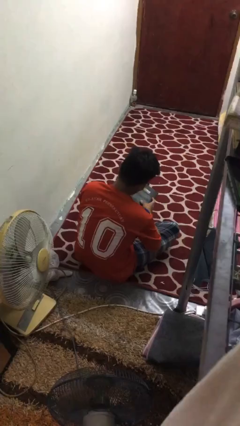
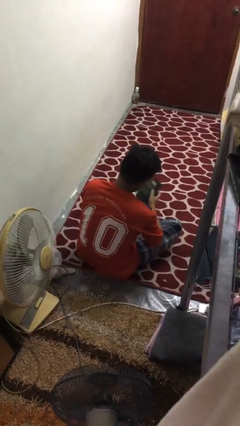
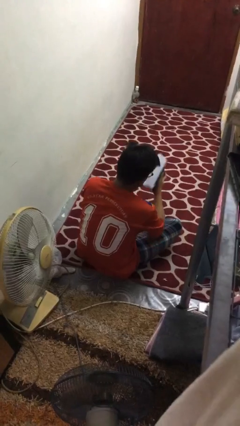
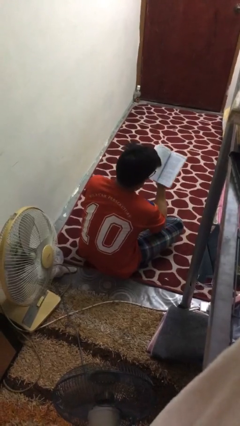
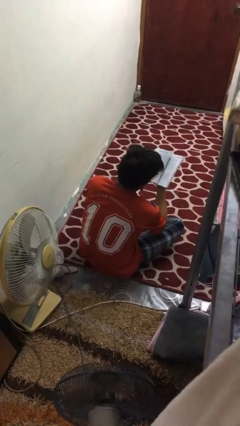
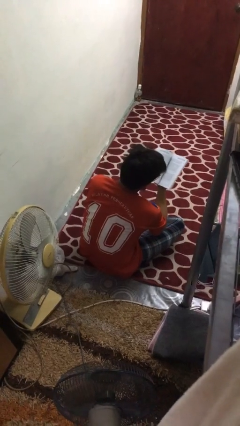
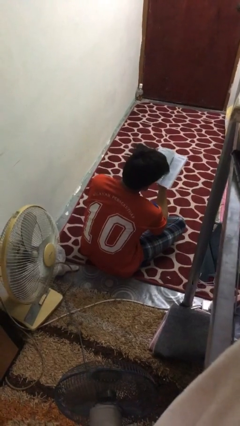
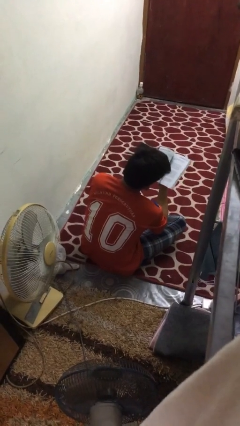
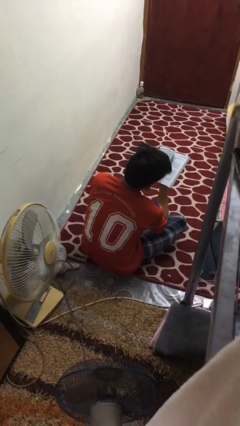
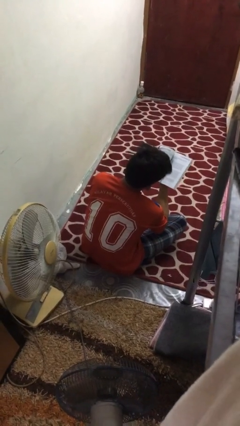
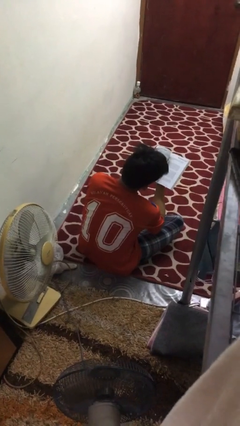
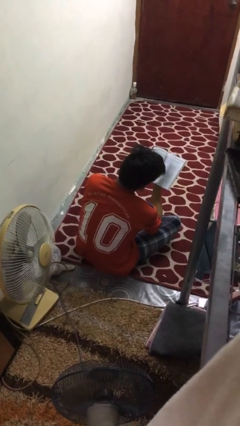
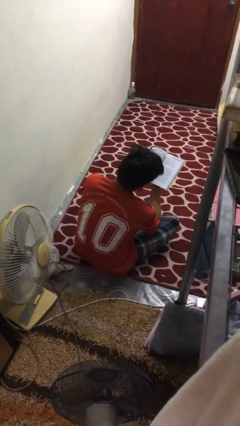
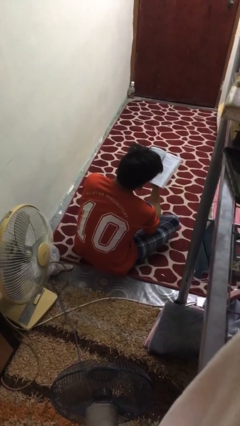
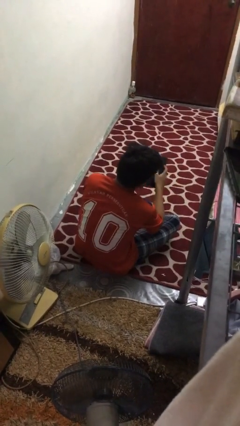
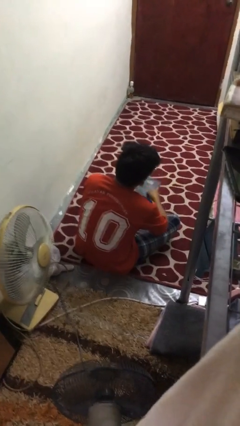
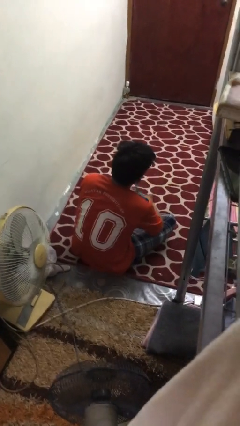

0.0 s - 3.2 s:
person reads book

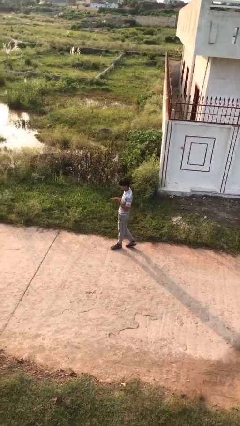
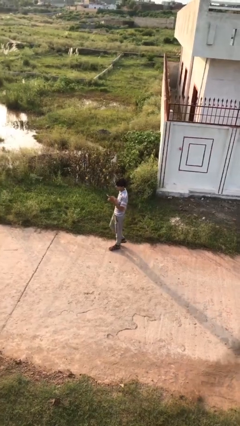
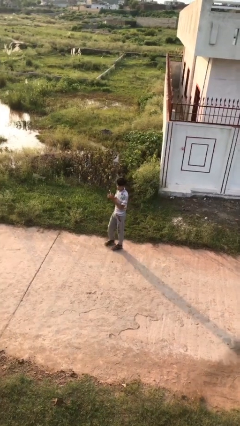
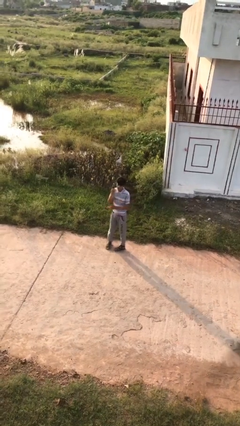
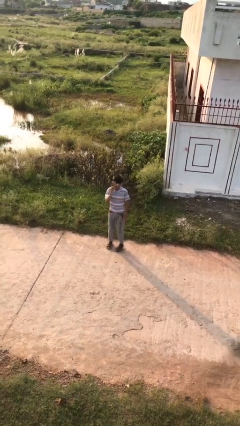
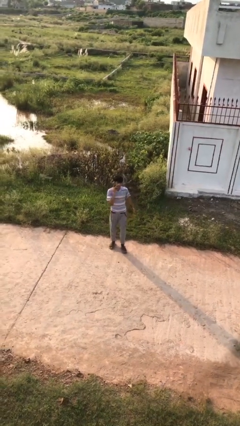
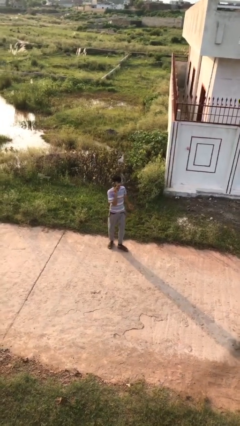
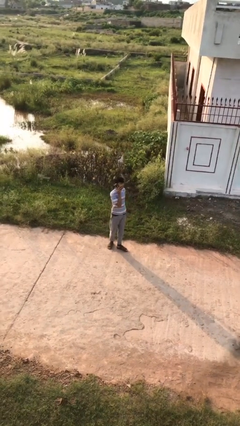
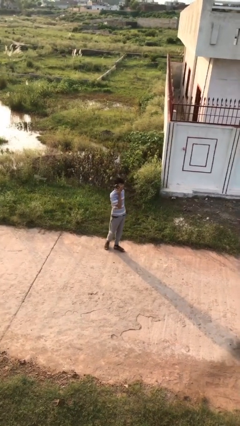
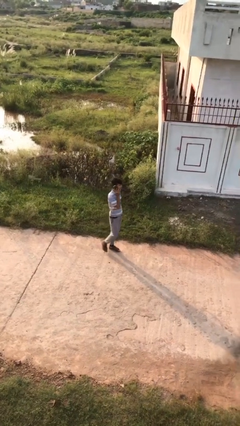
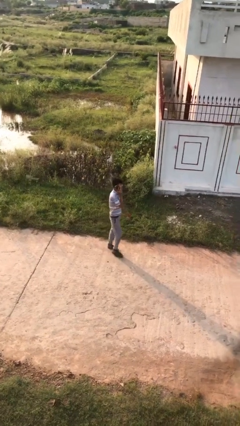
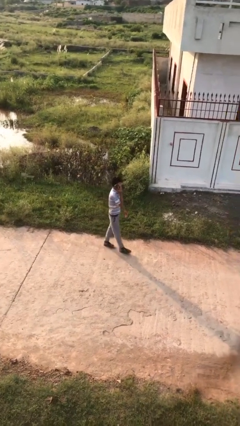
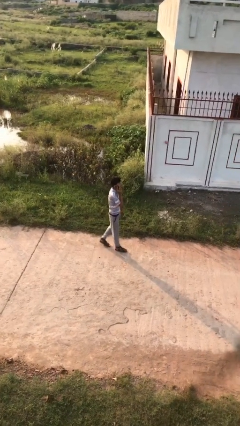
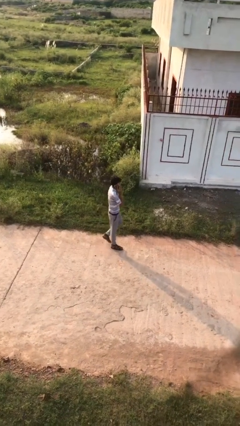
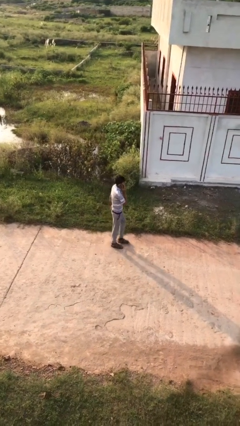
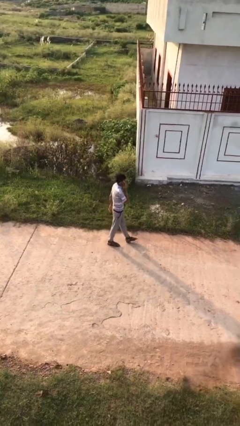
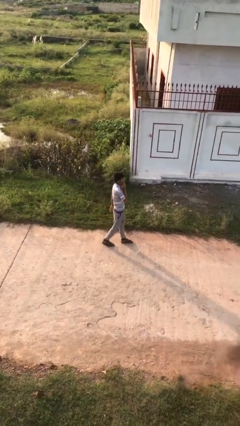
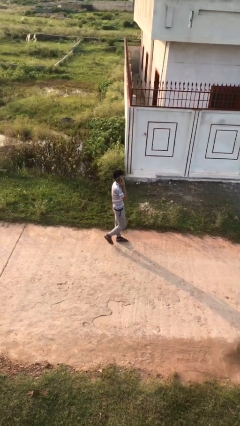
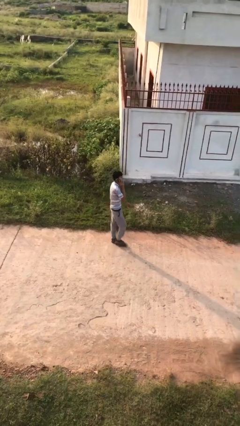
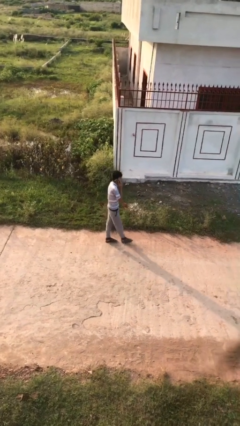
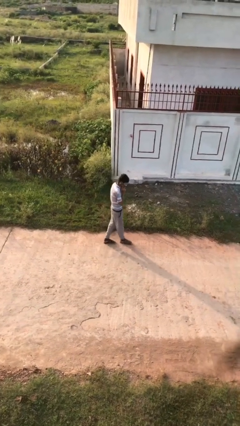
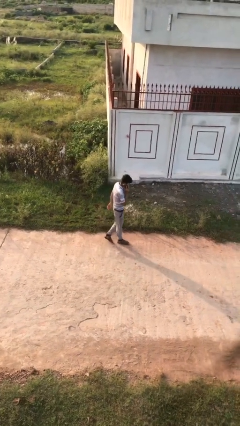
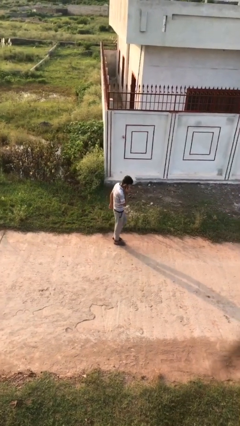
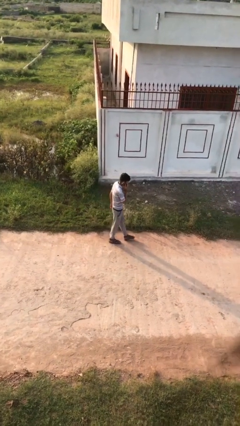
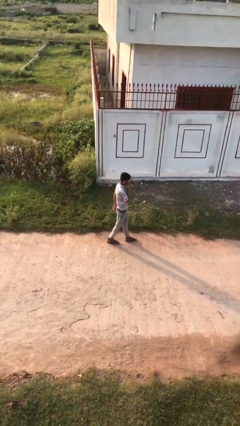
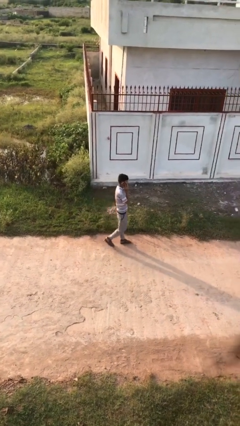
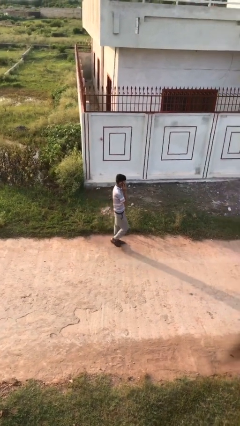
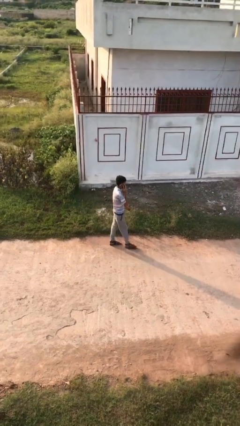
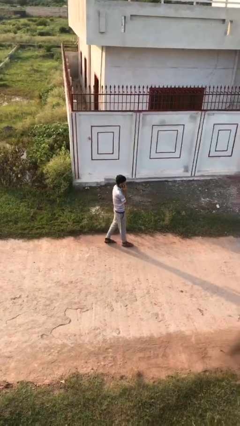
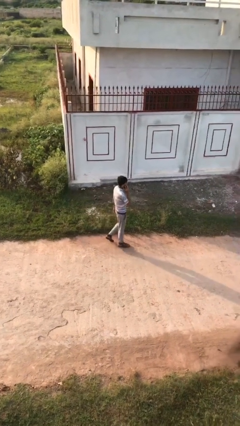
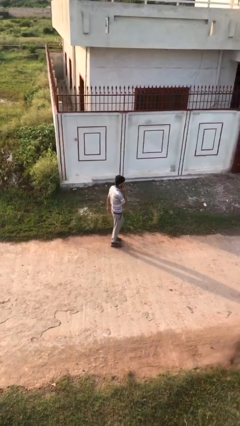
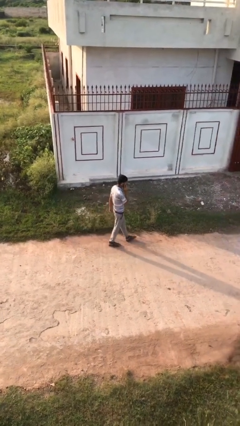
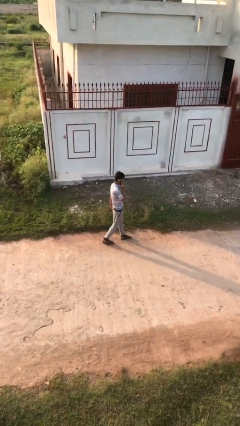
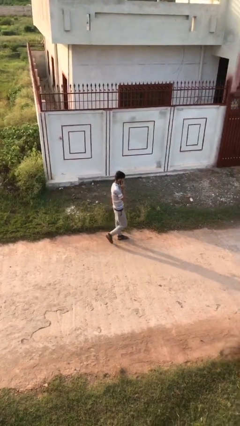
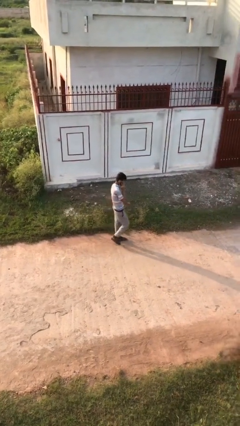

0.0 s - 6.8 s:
person talks on phone

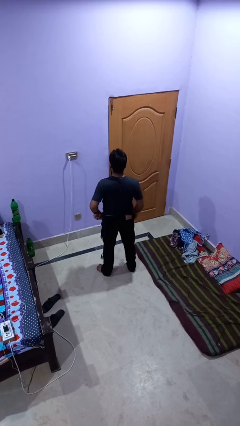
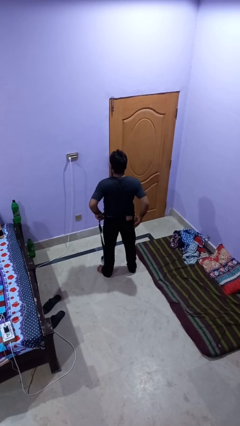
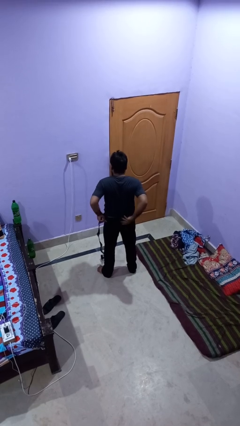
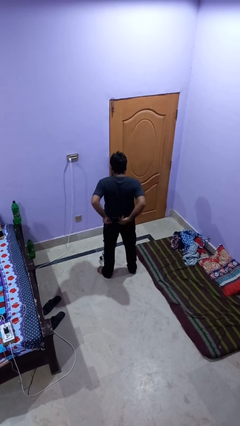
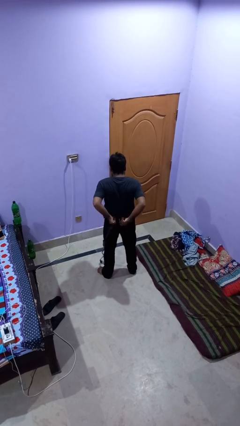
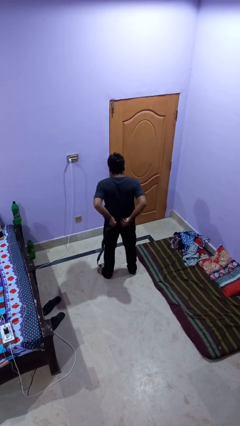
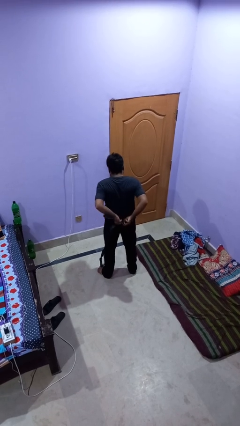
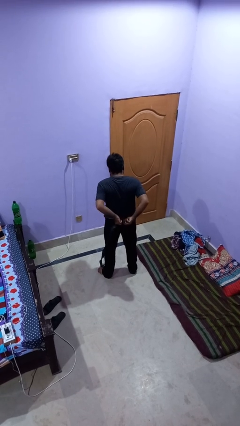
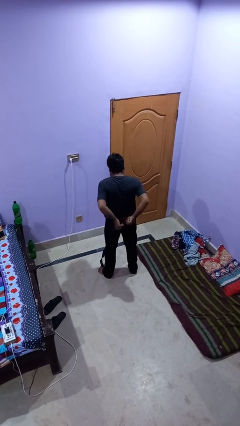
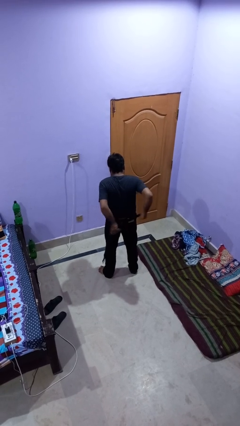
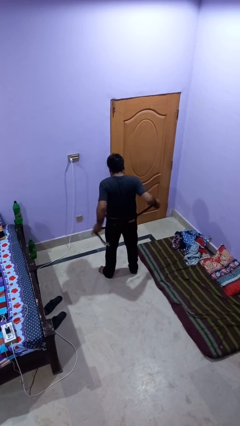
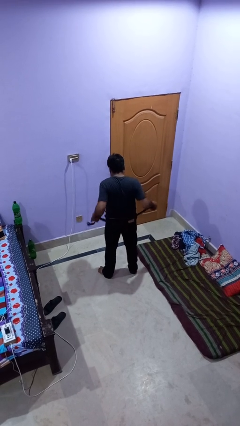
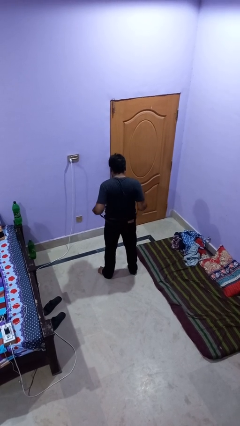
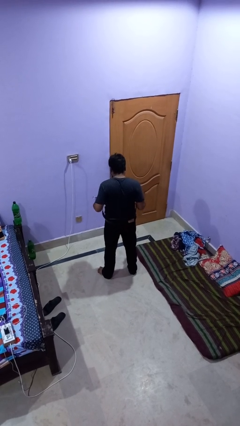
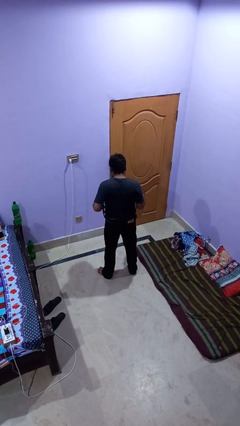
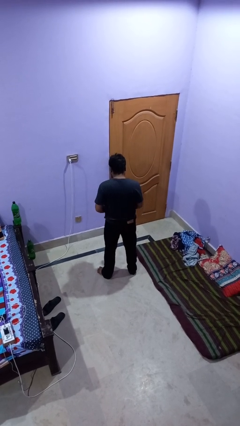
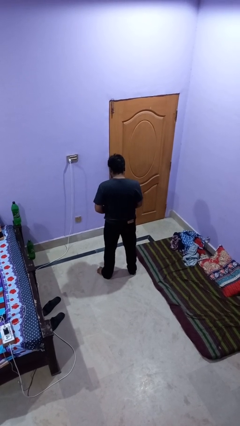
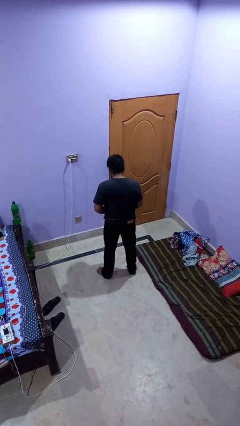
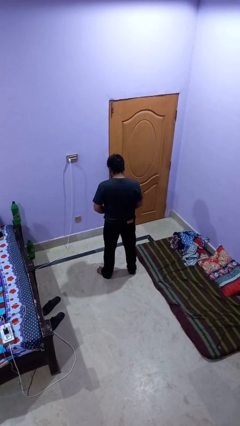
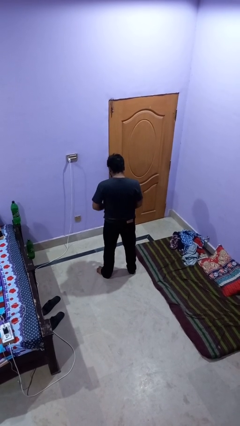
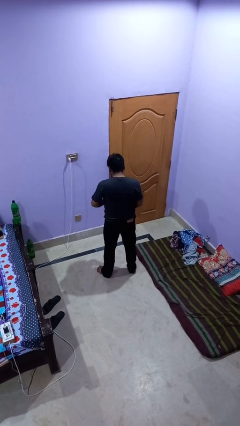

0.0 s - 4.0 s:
person puts on belt

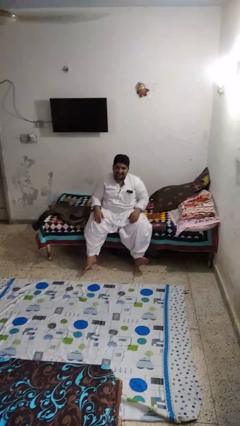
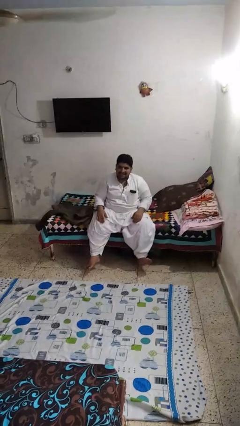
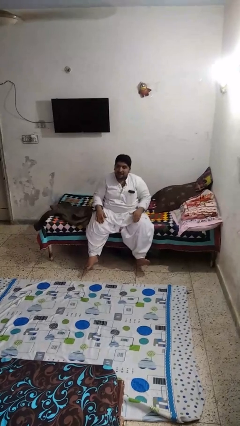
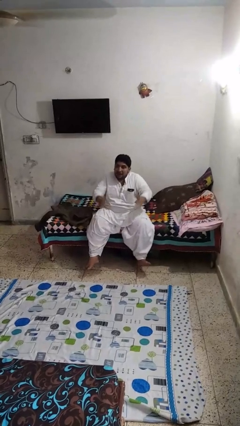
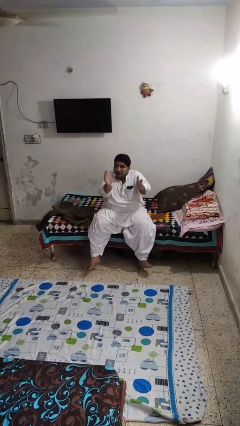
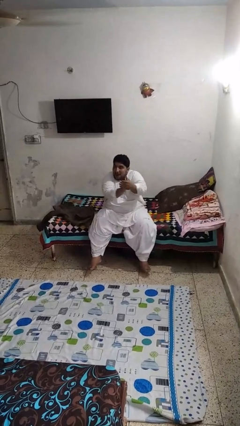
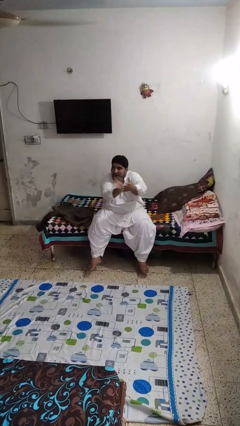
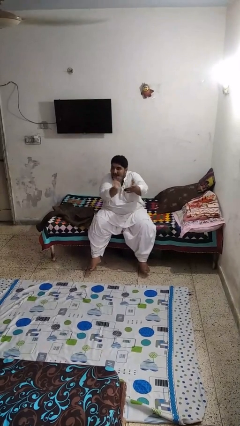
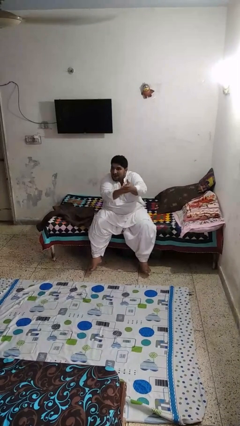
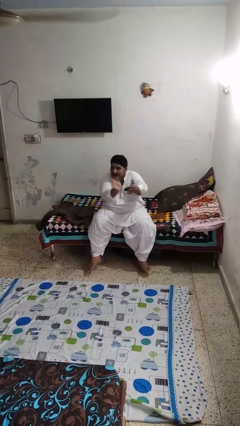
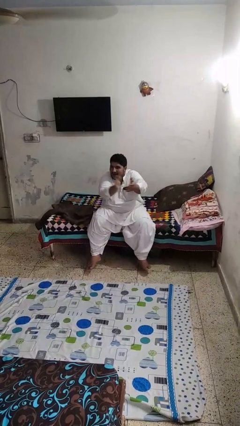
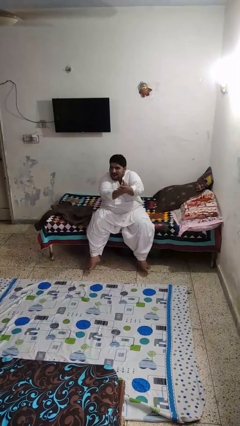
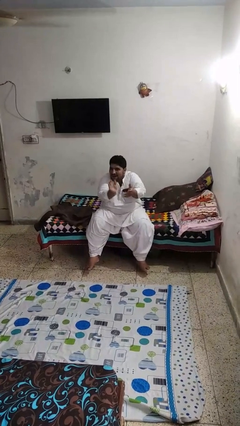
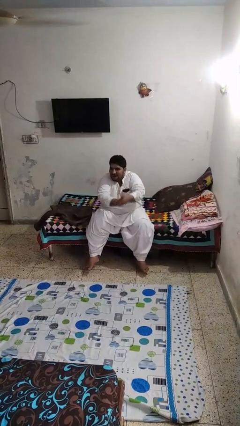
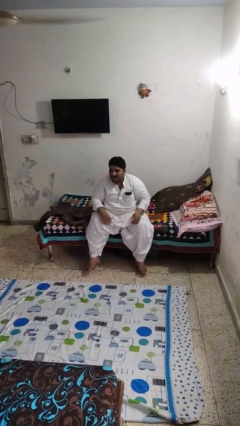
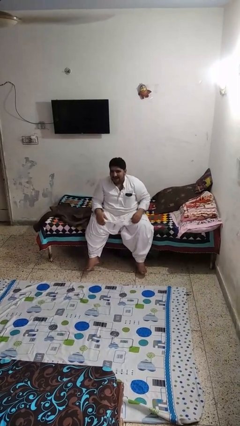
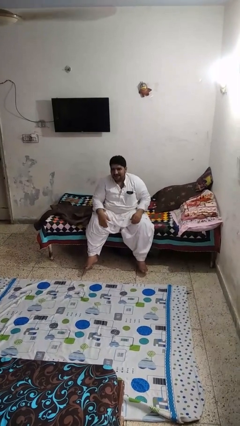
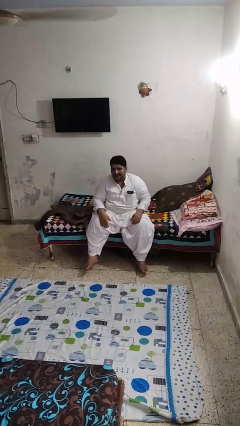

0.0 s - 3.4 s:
person claps hands
